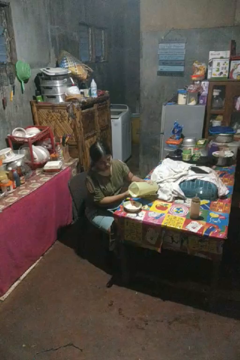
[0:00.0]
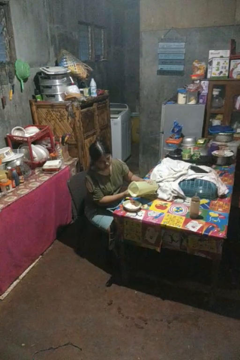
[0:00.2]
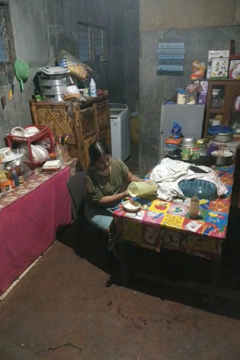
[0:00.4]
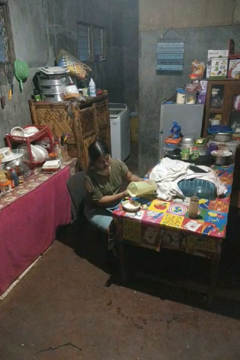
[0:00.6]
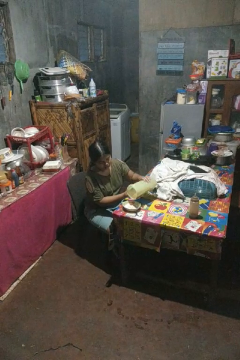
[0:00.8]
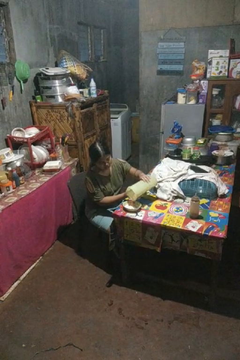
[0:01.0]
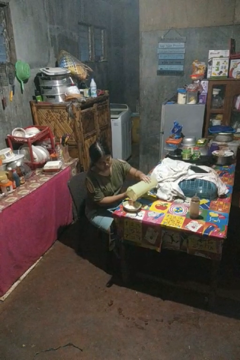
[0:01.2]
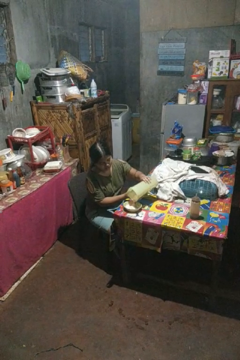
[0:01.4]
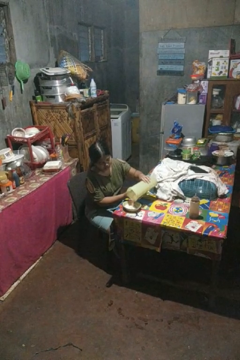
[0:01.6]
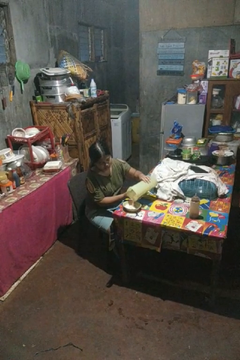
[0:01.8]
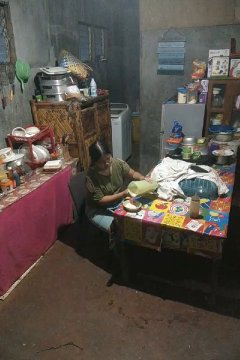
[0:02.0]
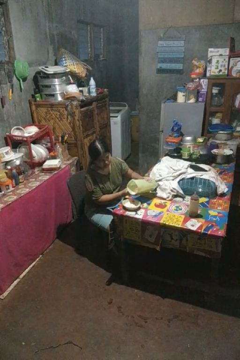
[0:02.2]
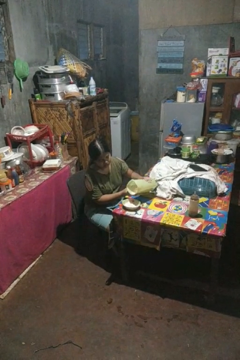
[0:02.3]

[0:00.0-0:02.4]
person pours into bowl

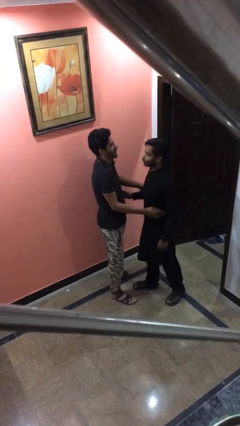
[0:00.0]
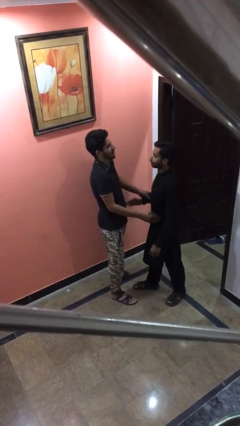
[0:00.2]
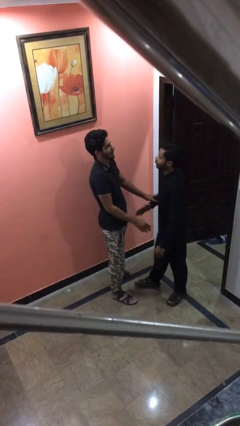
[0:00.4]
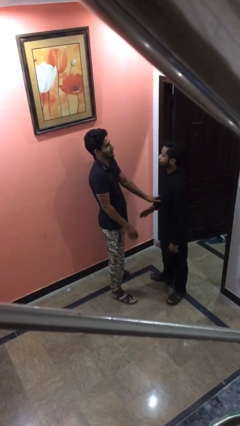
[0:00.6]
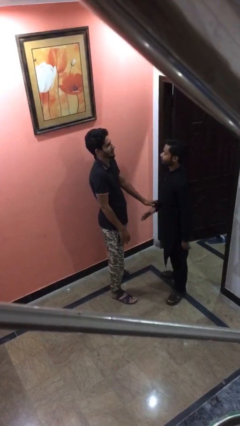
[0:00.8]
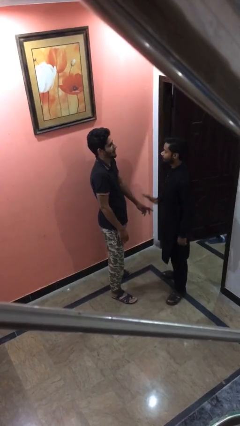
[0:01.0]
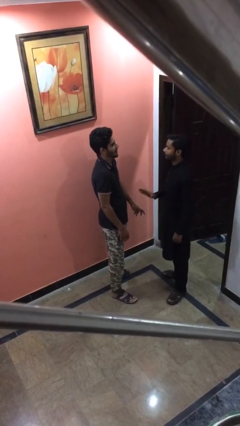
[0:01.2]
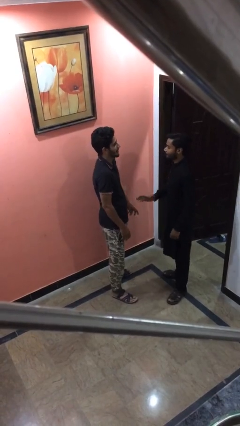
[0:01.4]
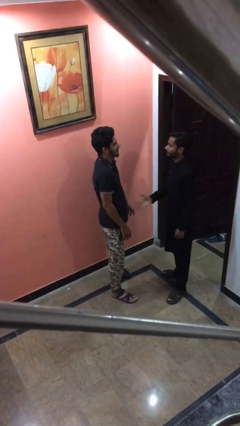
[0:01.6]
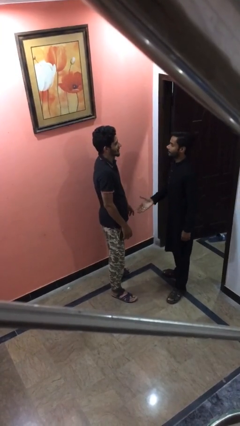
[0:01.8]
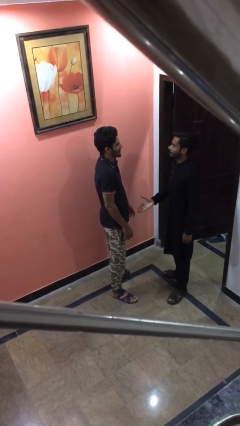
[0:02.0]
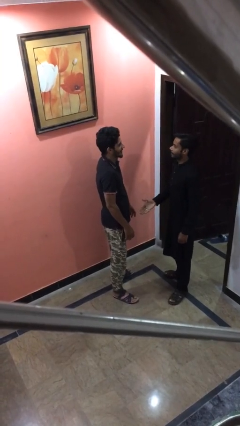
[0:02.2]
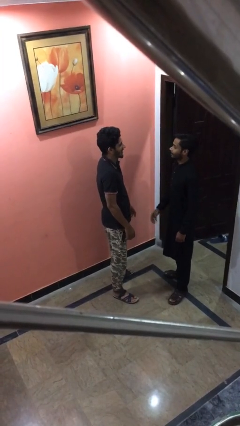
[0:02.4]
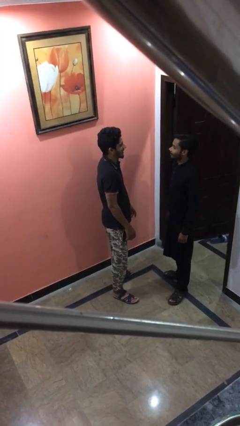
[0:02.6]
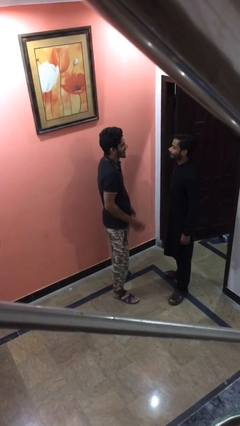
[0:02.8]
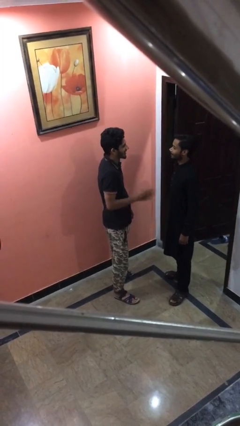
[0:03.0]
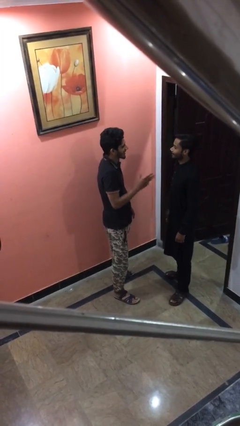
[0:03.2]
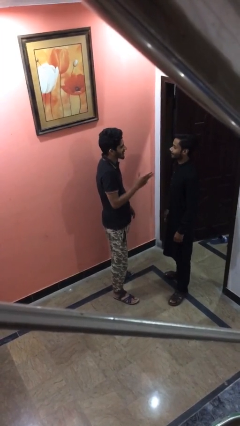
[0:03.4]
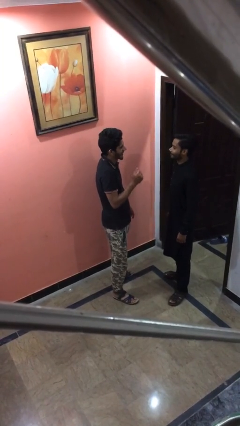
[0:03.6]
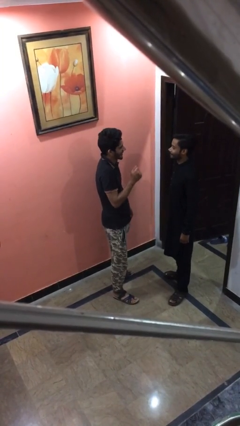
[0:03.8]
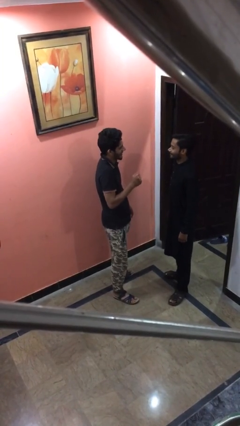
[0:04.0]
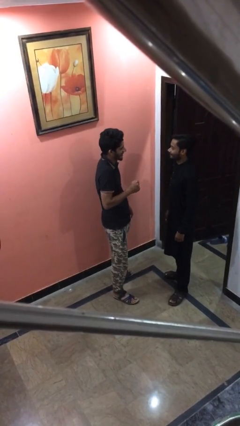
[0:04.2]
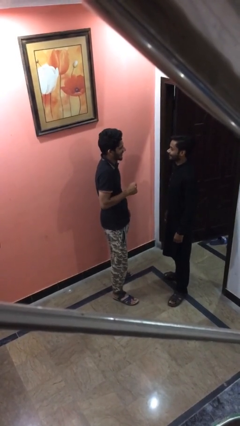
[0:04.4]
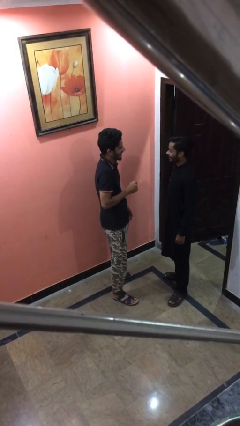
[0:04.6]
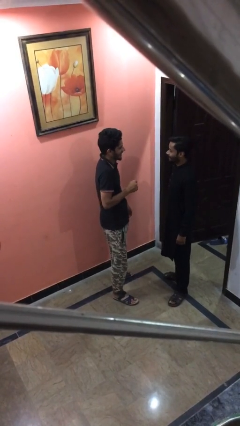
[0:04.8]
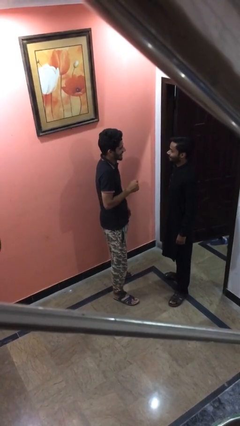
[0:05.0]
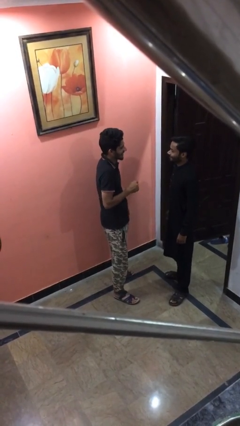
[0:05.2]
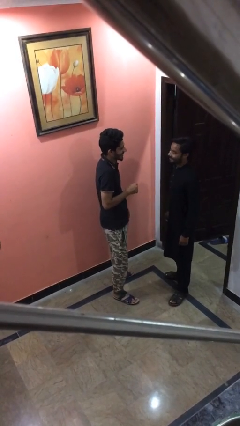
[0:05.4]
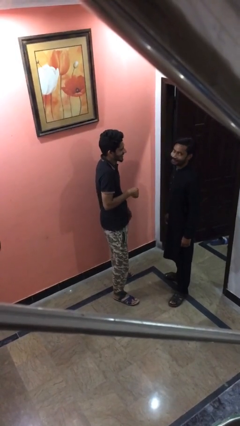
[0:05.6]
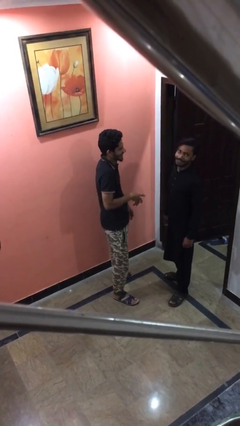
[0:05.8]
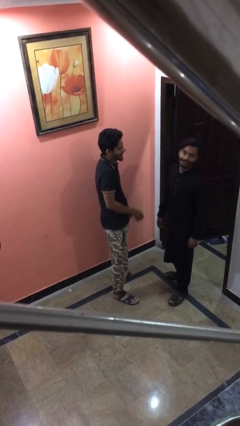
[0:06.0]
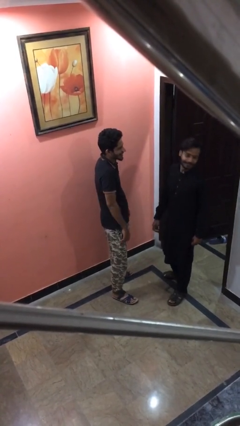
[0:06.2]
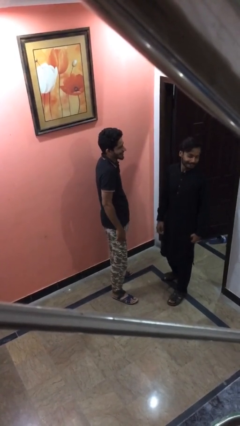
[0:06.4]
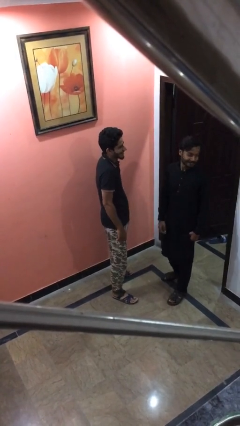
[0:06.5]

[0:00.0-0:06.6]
person talks to person

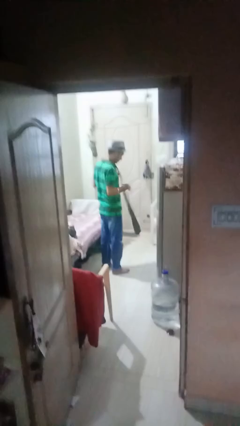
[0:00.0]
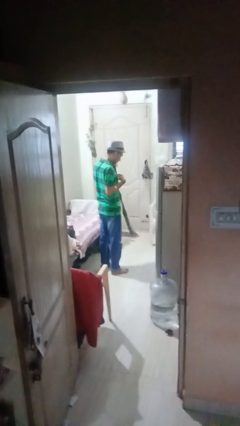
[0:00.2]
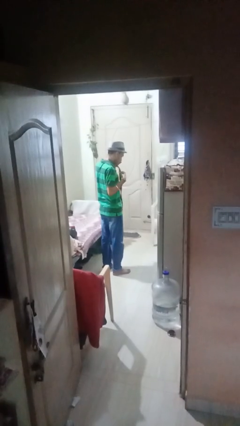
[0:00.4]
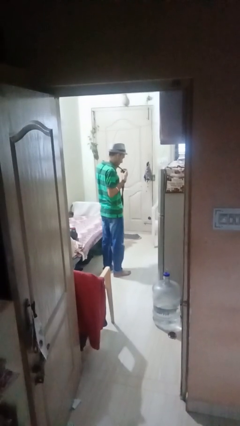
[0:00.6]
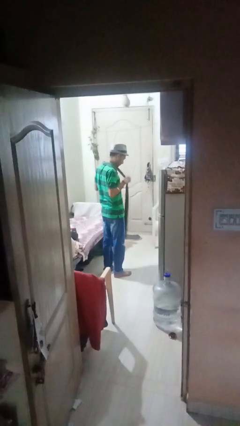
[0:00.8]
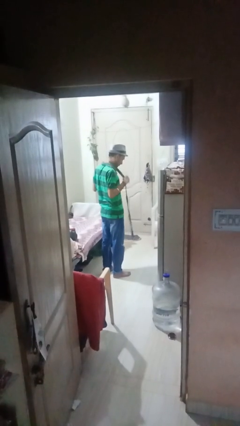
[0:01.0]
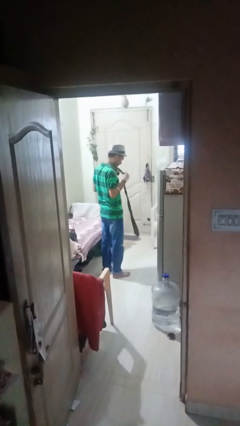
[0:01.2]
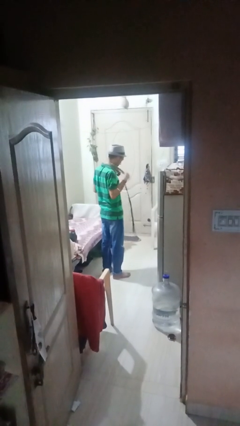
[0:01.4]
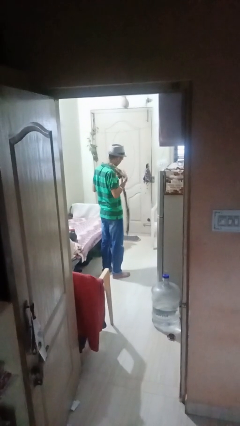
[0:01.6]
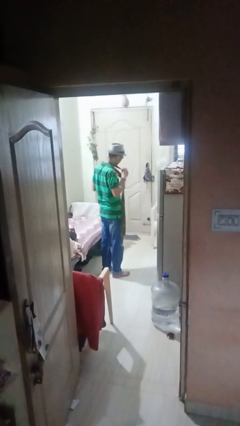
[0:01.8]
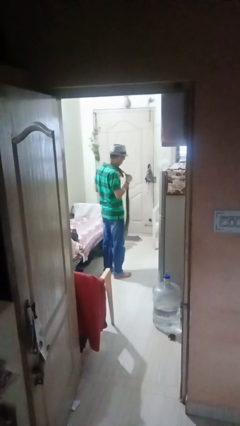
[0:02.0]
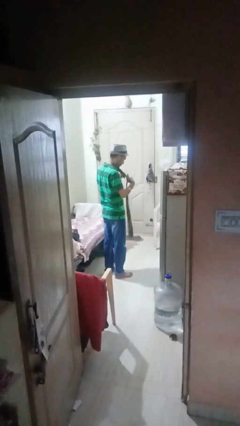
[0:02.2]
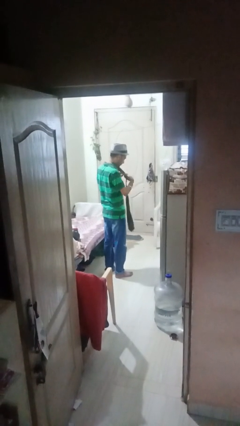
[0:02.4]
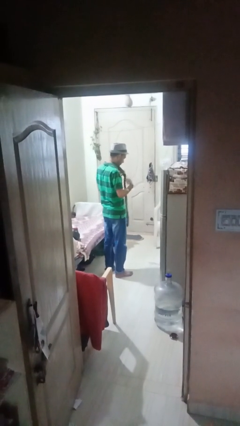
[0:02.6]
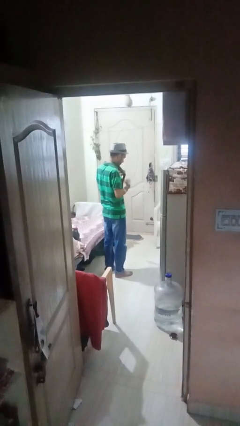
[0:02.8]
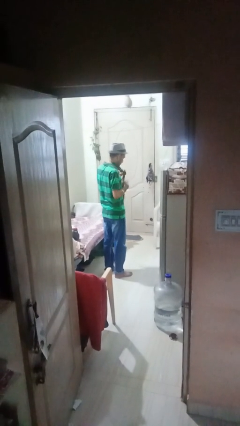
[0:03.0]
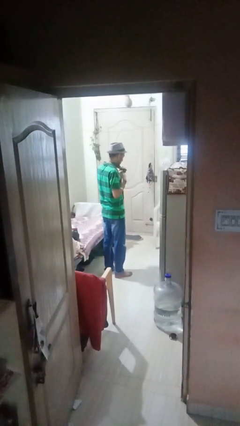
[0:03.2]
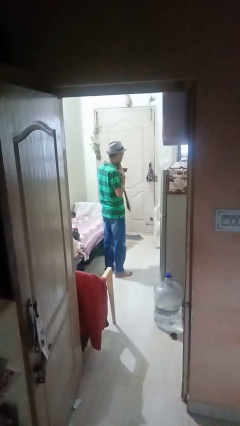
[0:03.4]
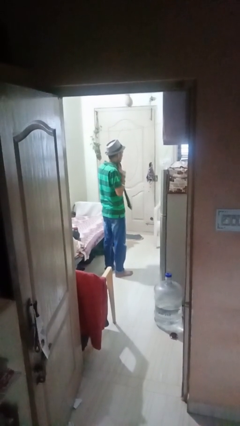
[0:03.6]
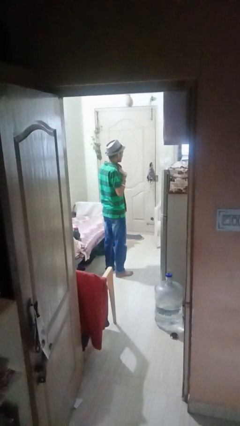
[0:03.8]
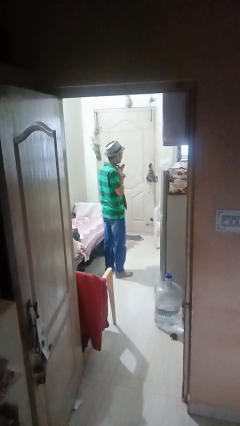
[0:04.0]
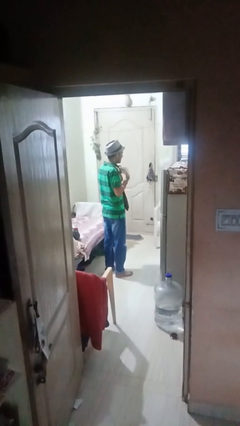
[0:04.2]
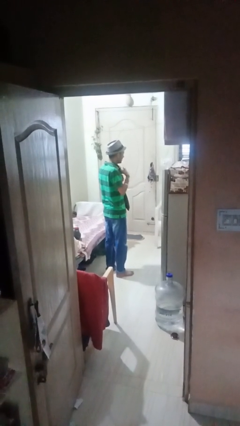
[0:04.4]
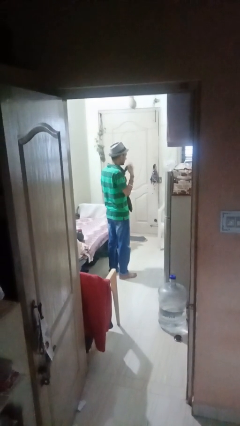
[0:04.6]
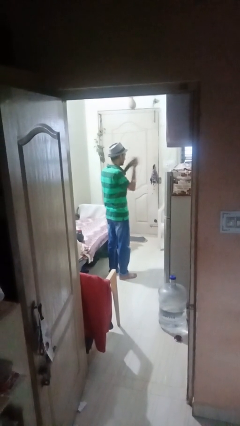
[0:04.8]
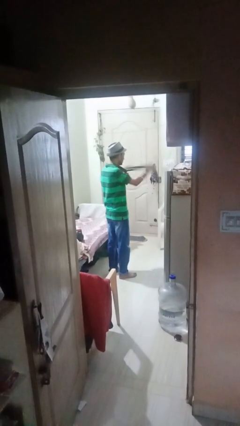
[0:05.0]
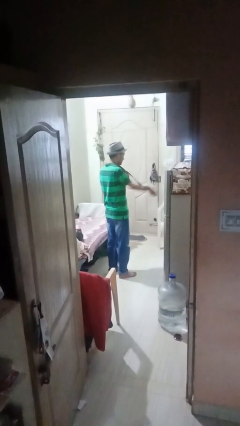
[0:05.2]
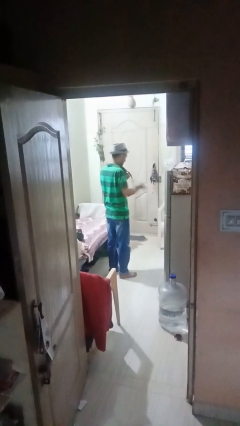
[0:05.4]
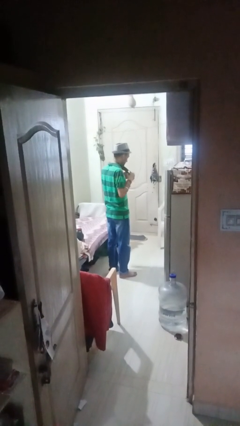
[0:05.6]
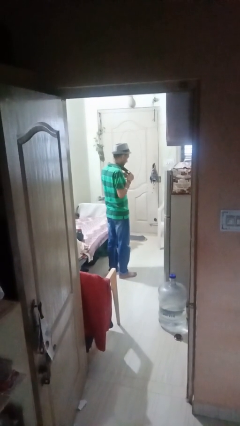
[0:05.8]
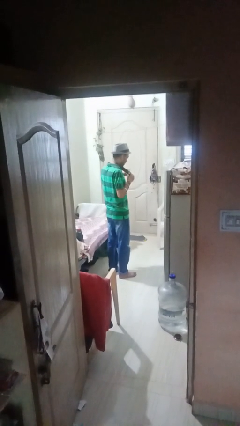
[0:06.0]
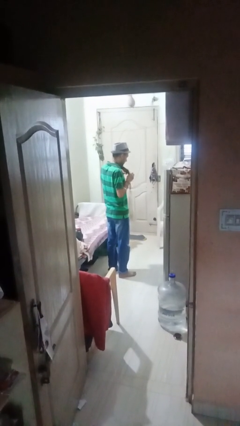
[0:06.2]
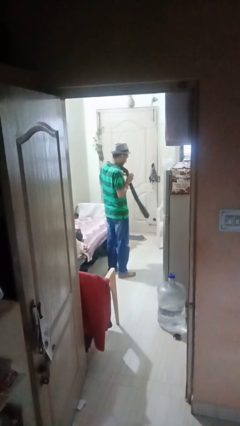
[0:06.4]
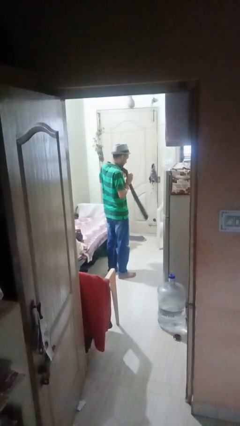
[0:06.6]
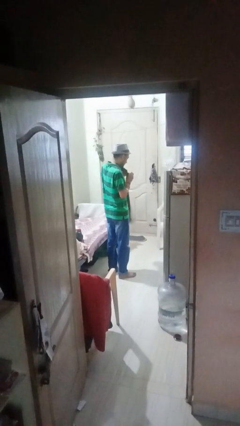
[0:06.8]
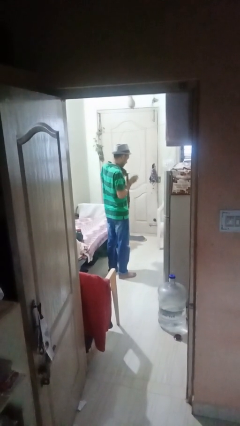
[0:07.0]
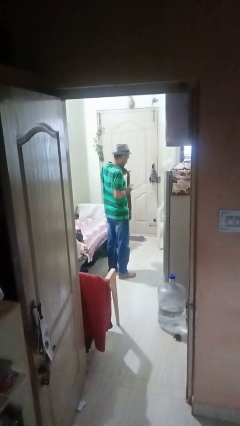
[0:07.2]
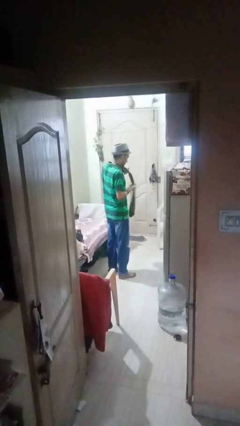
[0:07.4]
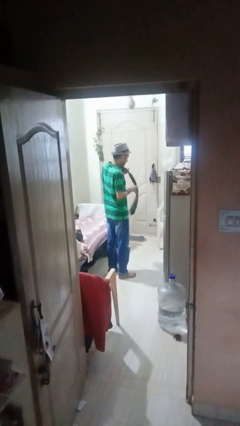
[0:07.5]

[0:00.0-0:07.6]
person puts on necktie

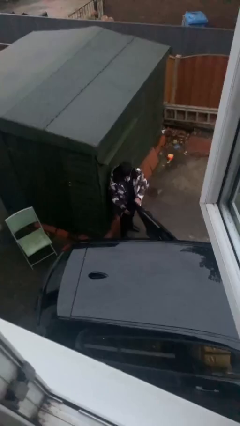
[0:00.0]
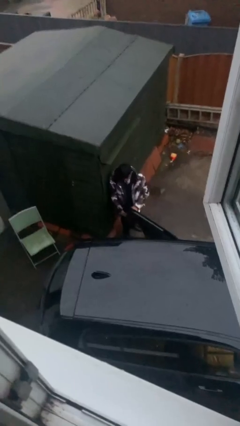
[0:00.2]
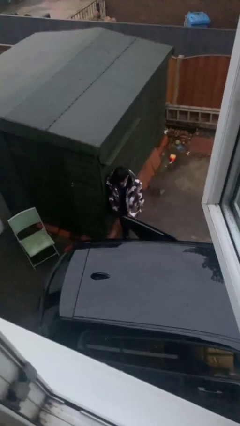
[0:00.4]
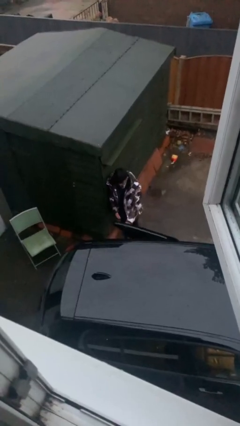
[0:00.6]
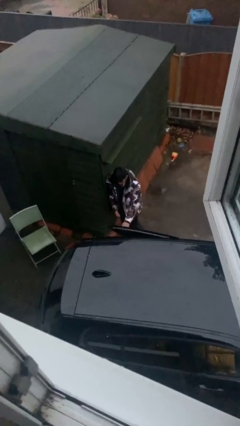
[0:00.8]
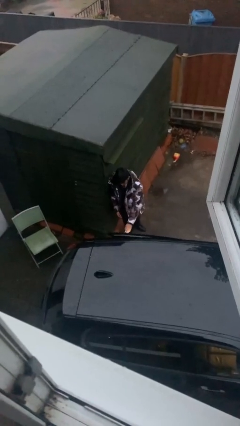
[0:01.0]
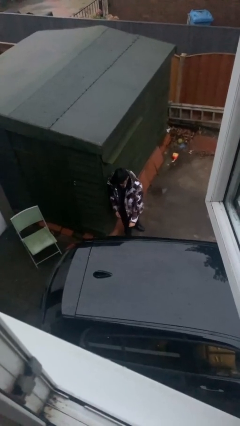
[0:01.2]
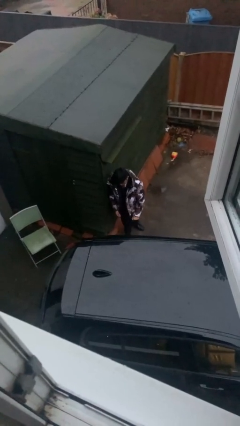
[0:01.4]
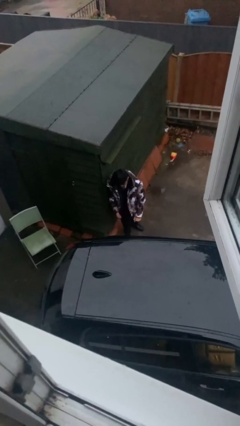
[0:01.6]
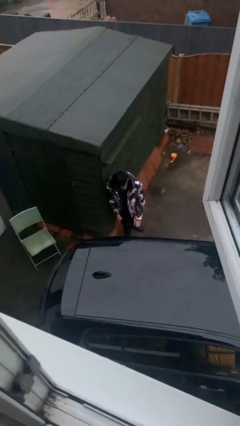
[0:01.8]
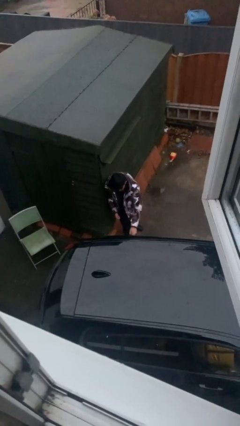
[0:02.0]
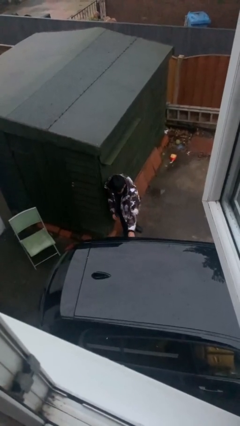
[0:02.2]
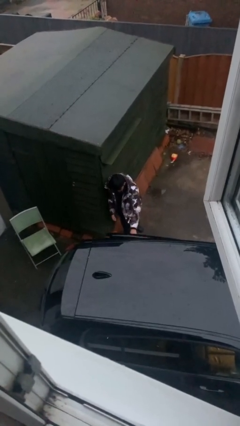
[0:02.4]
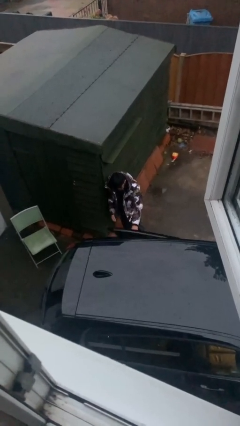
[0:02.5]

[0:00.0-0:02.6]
person closes car door
